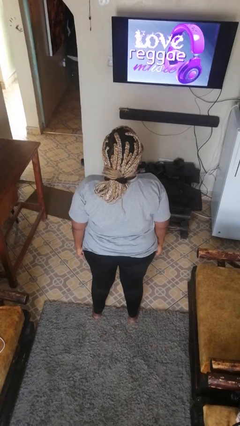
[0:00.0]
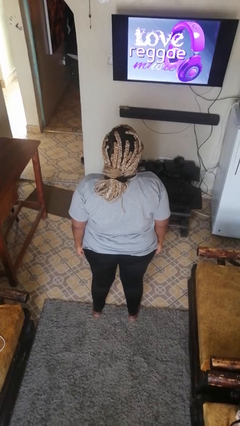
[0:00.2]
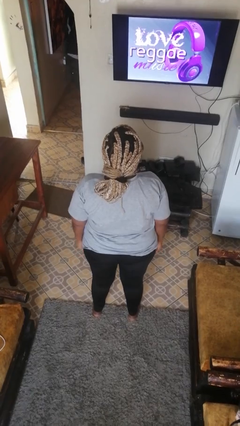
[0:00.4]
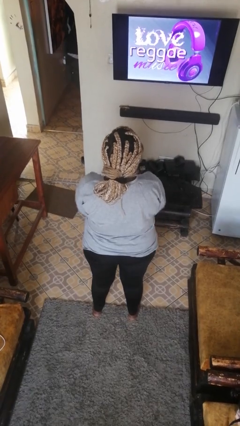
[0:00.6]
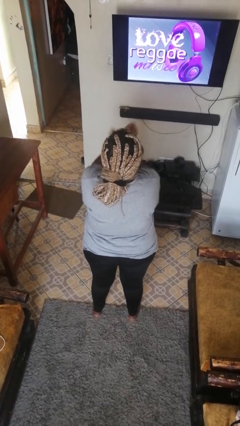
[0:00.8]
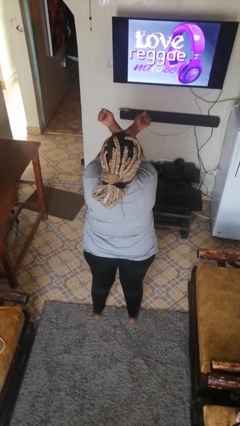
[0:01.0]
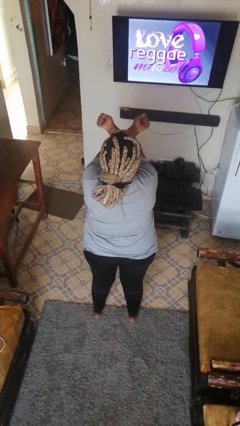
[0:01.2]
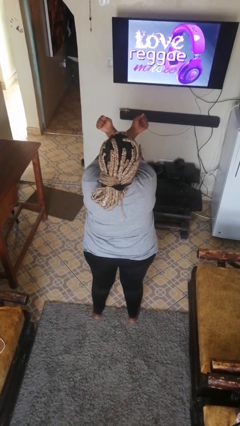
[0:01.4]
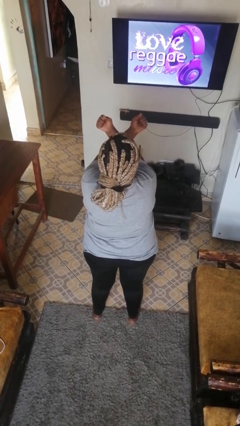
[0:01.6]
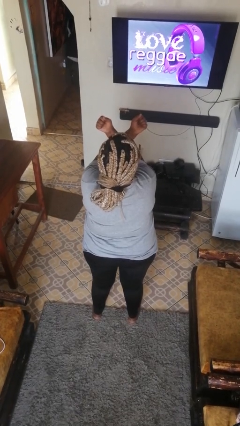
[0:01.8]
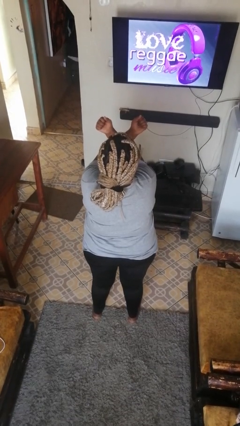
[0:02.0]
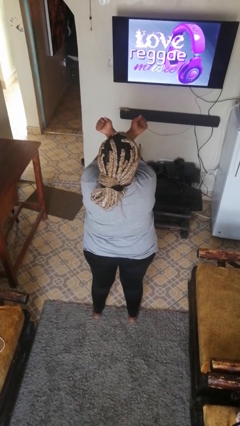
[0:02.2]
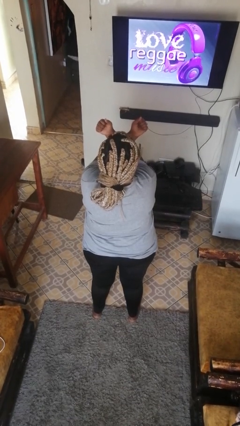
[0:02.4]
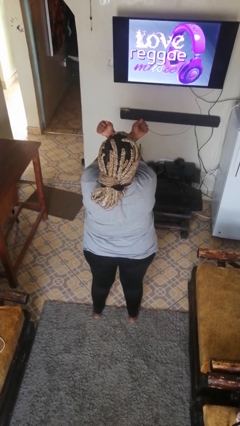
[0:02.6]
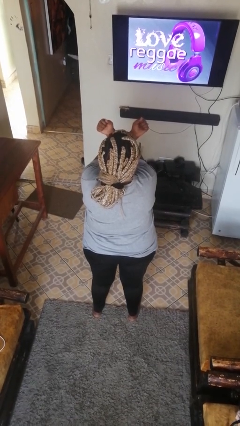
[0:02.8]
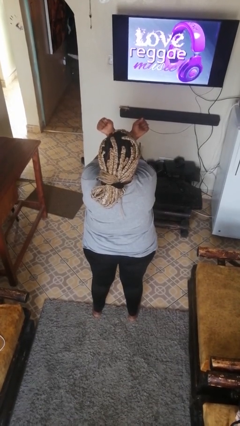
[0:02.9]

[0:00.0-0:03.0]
person gestures arms x

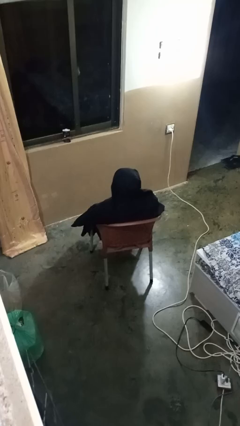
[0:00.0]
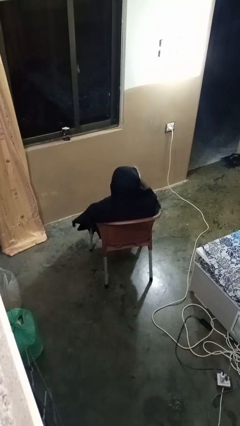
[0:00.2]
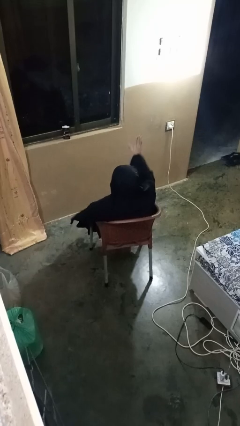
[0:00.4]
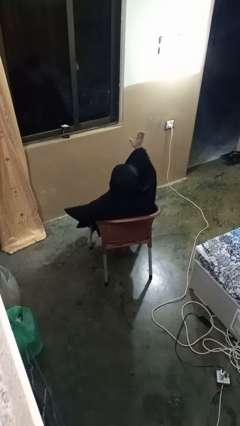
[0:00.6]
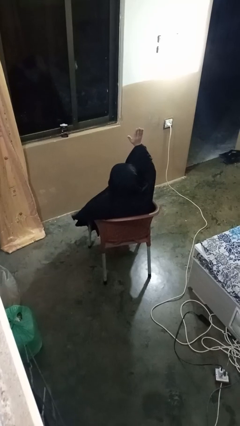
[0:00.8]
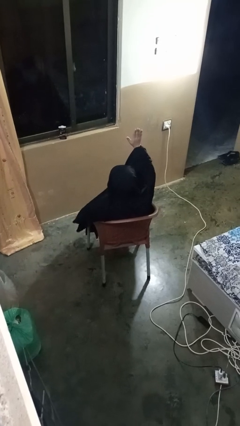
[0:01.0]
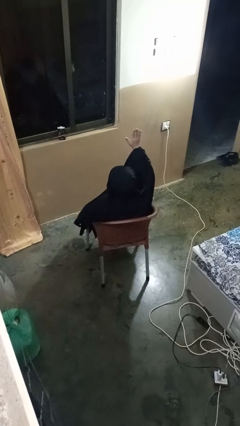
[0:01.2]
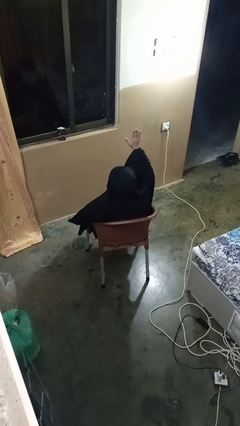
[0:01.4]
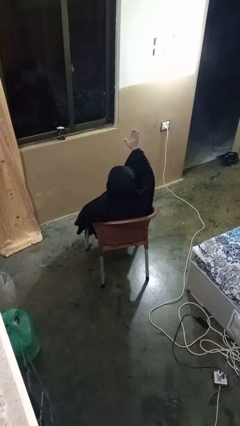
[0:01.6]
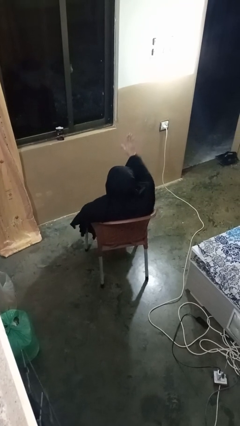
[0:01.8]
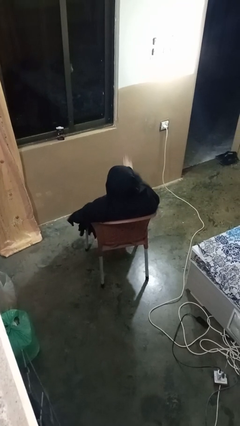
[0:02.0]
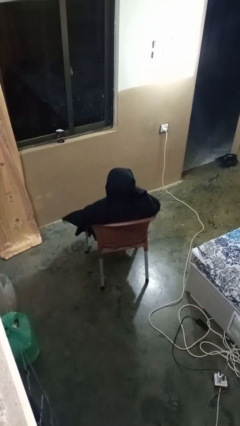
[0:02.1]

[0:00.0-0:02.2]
person gestures raise hand

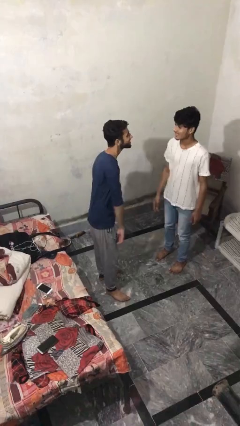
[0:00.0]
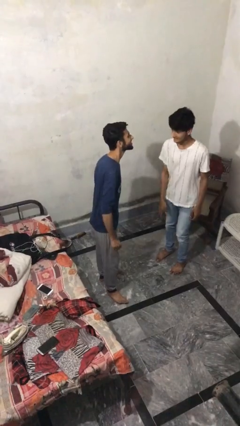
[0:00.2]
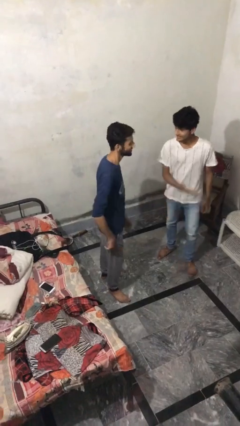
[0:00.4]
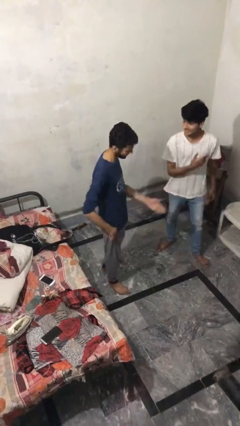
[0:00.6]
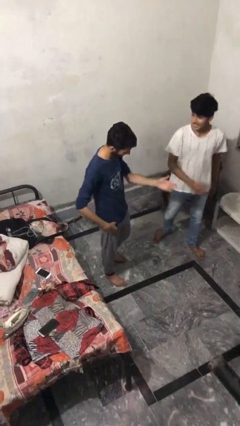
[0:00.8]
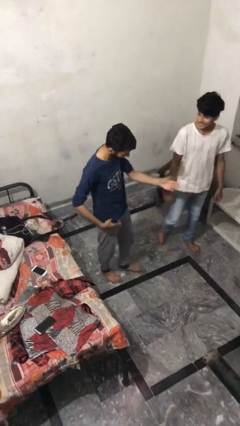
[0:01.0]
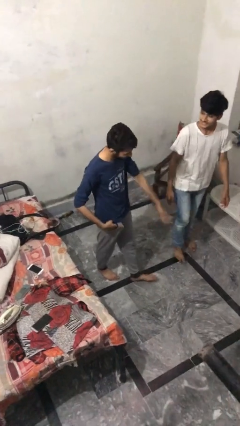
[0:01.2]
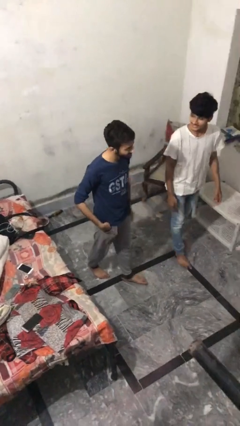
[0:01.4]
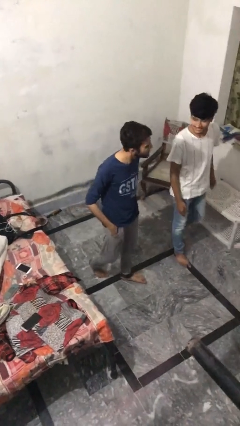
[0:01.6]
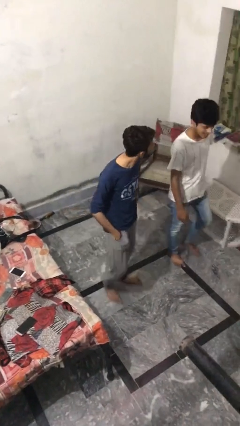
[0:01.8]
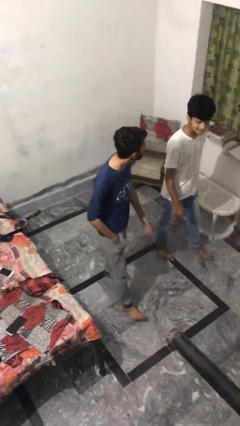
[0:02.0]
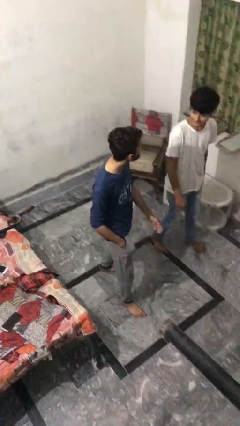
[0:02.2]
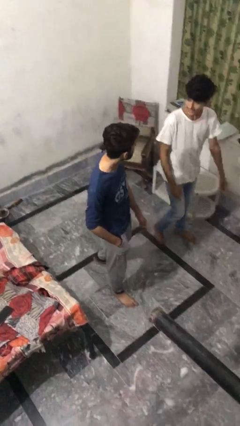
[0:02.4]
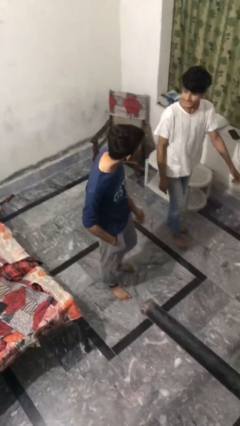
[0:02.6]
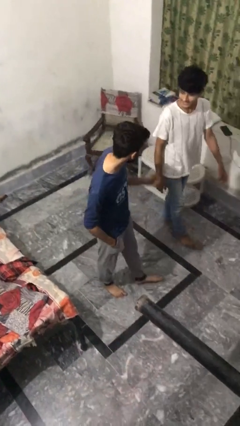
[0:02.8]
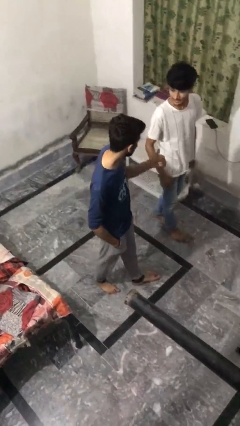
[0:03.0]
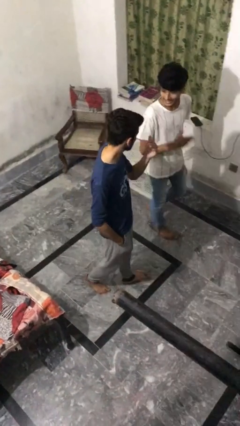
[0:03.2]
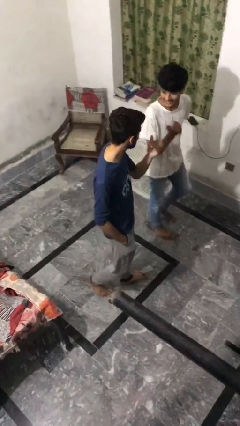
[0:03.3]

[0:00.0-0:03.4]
person talks to person

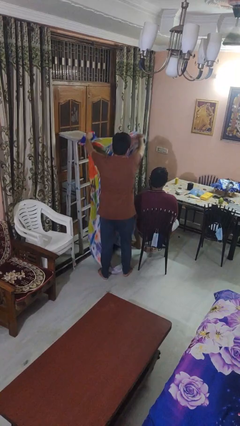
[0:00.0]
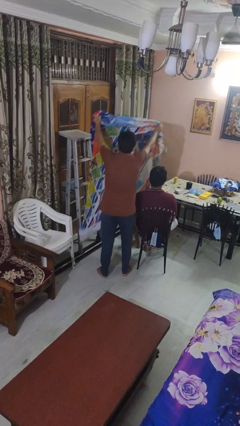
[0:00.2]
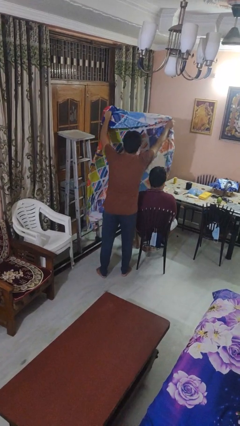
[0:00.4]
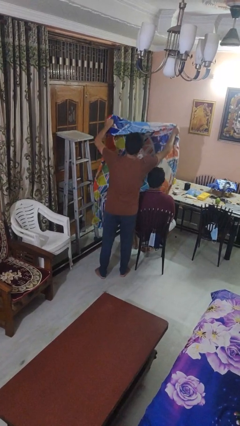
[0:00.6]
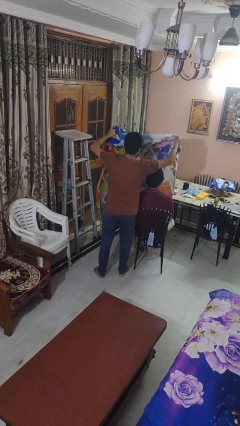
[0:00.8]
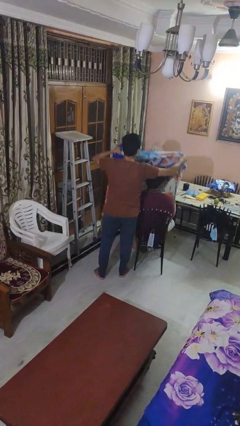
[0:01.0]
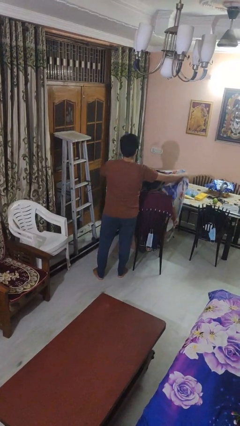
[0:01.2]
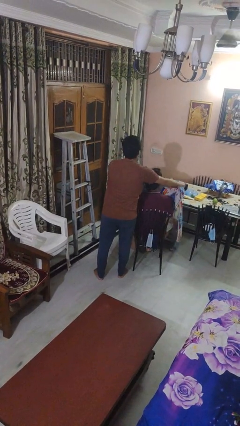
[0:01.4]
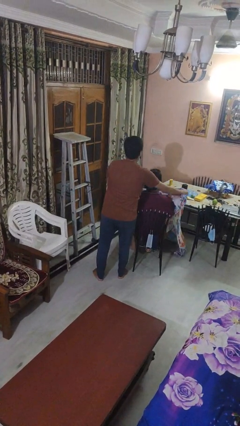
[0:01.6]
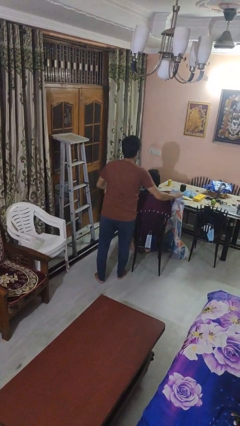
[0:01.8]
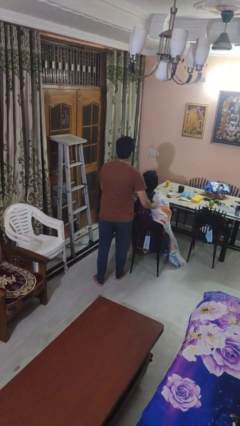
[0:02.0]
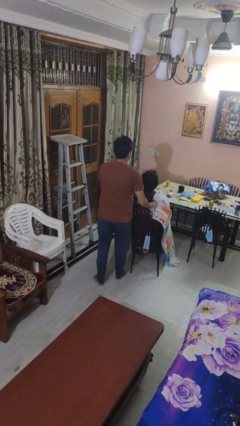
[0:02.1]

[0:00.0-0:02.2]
person covers friend with blanket

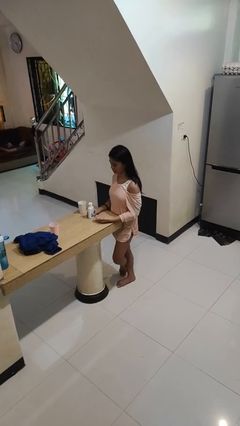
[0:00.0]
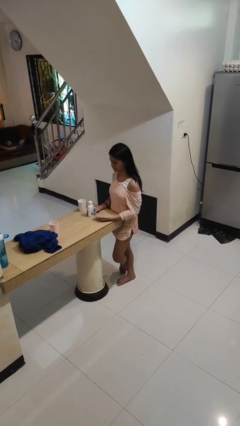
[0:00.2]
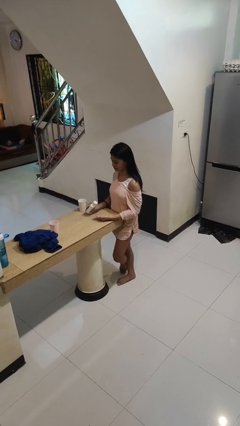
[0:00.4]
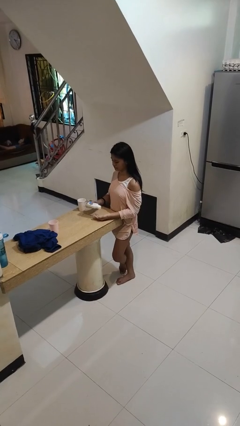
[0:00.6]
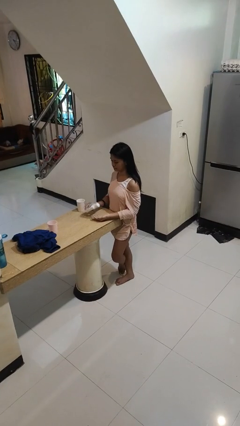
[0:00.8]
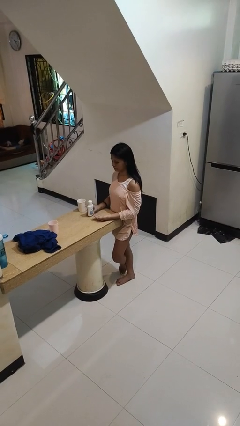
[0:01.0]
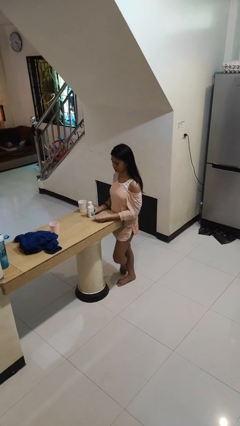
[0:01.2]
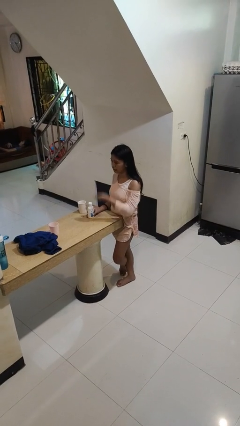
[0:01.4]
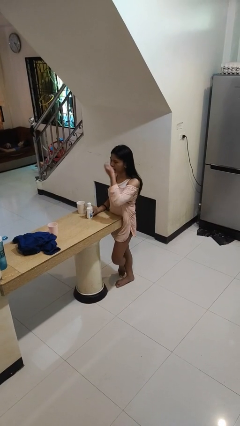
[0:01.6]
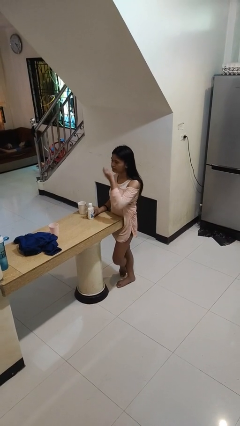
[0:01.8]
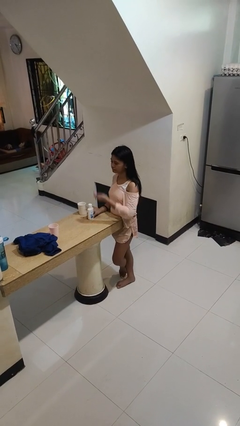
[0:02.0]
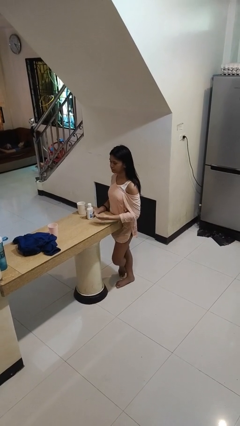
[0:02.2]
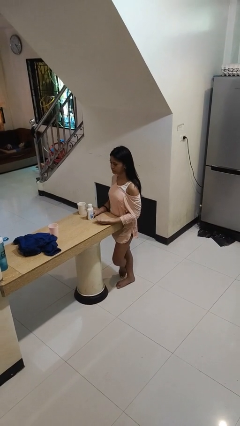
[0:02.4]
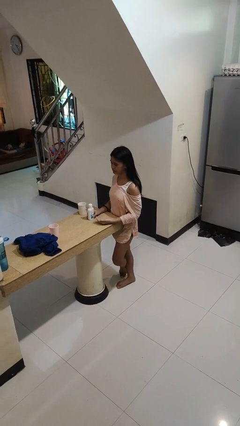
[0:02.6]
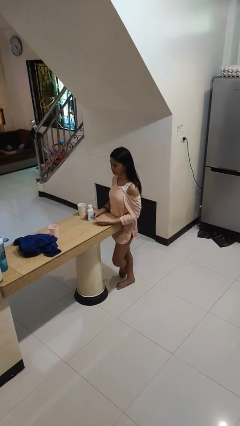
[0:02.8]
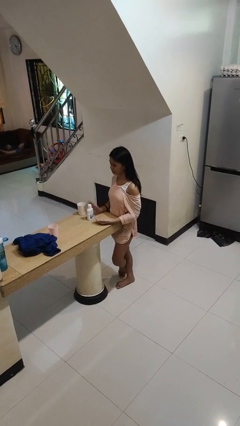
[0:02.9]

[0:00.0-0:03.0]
person takes medicine pills

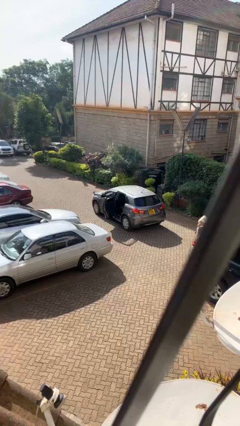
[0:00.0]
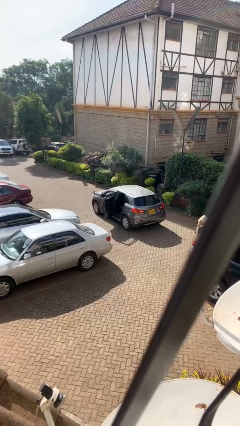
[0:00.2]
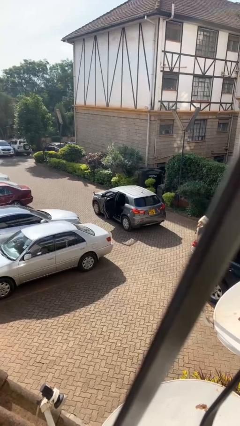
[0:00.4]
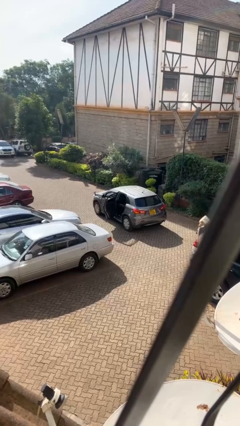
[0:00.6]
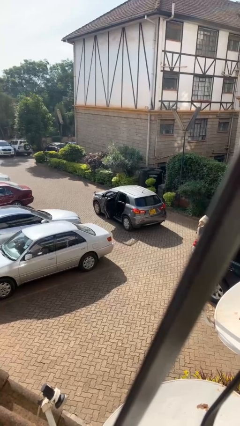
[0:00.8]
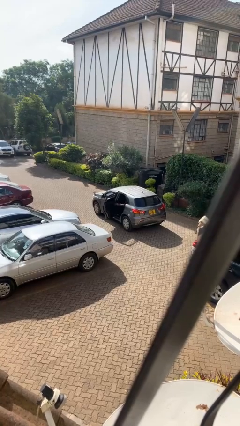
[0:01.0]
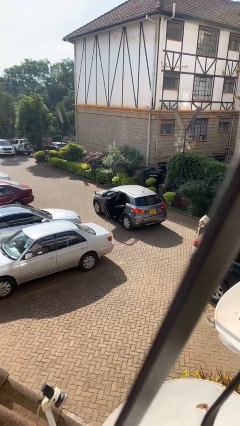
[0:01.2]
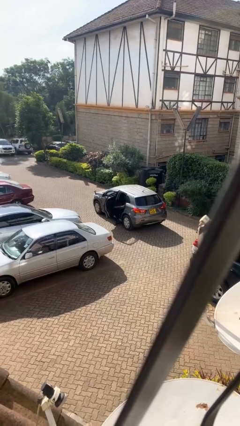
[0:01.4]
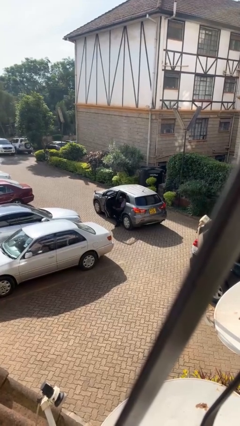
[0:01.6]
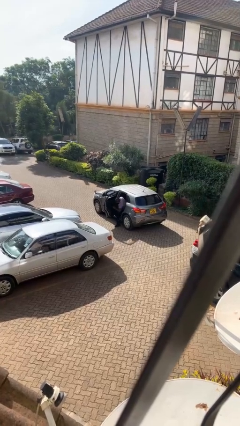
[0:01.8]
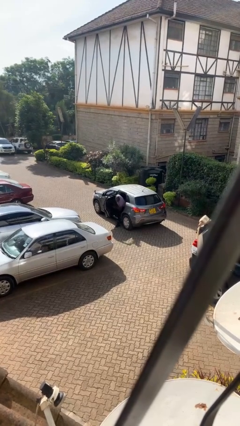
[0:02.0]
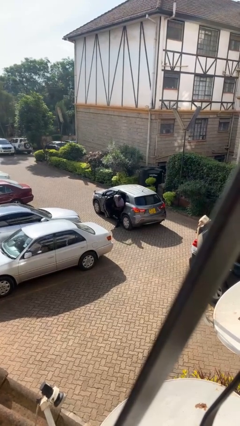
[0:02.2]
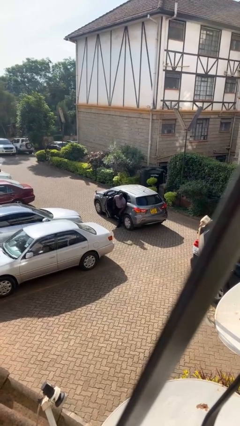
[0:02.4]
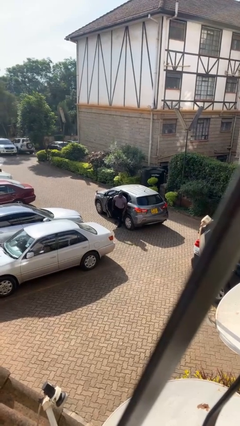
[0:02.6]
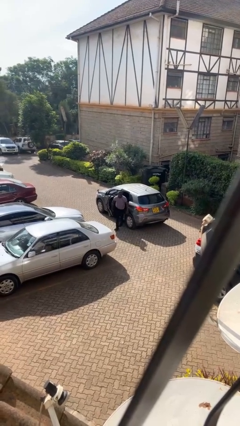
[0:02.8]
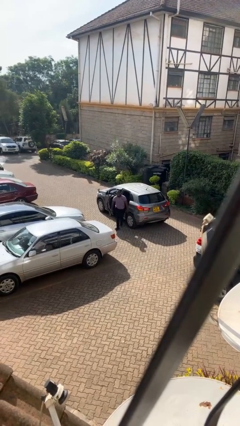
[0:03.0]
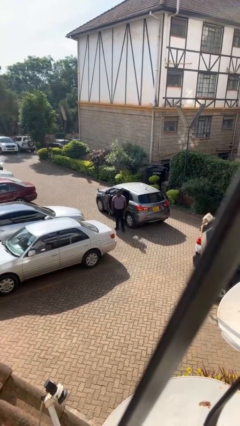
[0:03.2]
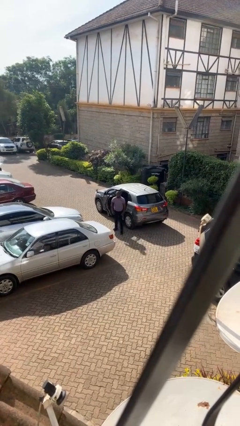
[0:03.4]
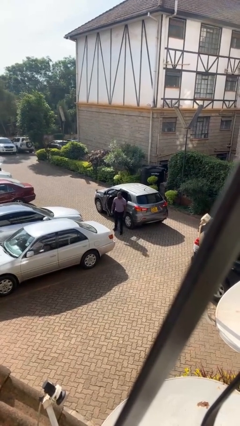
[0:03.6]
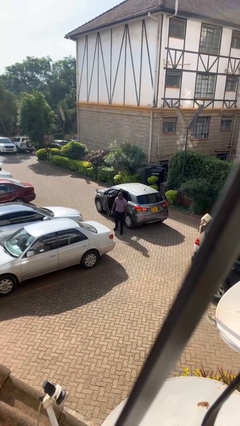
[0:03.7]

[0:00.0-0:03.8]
person exits car

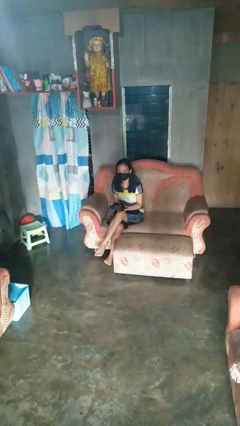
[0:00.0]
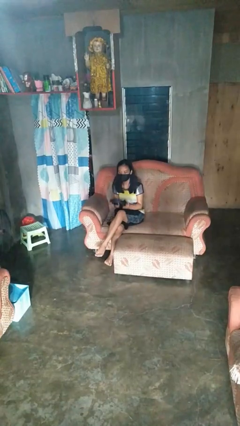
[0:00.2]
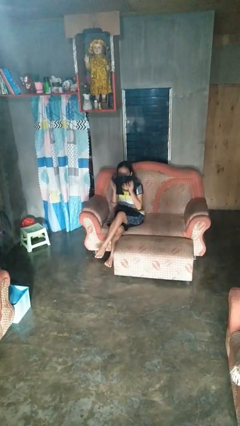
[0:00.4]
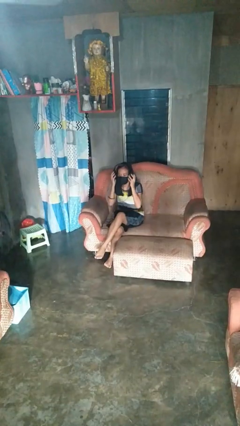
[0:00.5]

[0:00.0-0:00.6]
person puts on headphones
